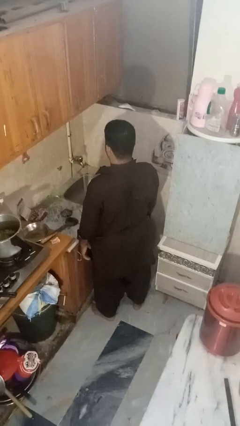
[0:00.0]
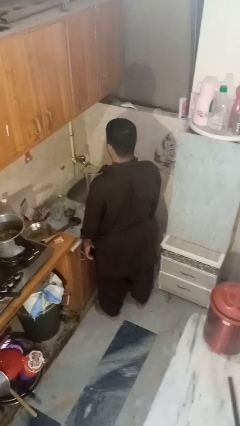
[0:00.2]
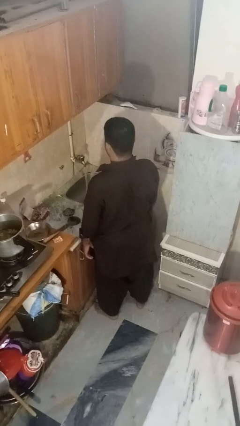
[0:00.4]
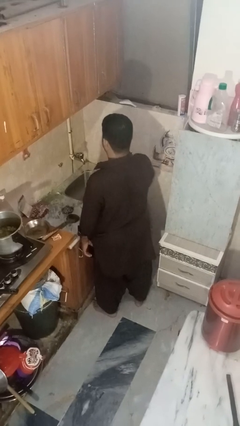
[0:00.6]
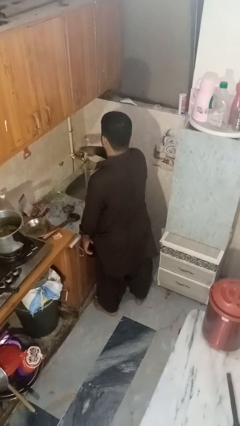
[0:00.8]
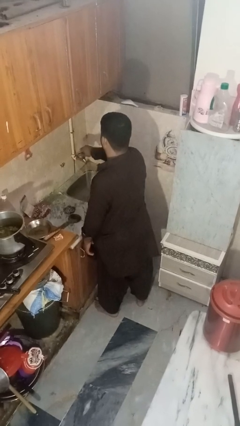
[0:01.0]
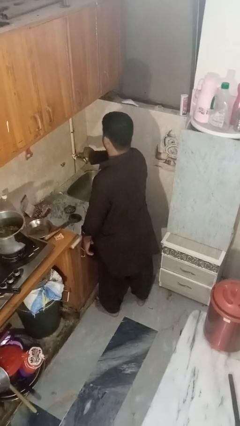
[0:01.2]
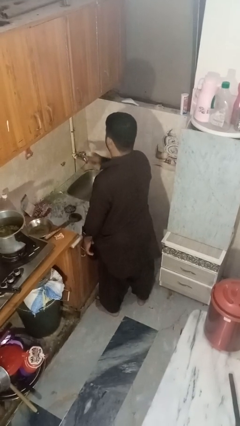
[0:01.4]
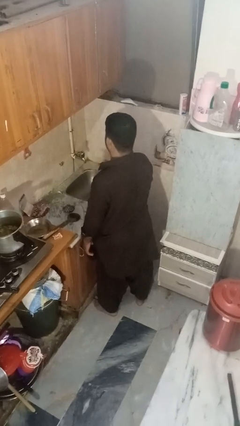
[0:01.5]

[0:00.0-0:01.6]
person turns off faucet

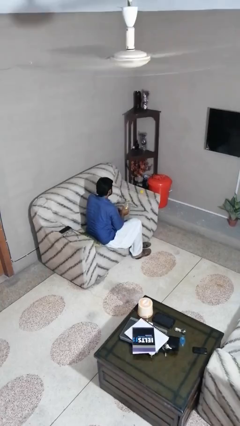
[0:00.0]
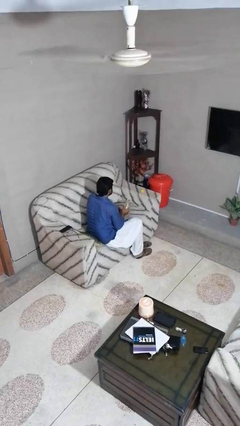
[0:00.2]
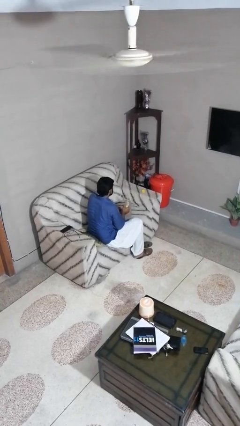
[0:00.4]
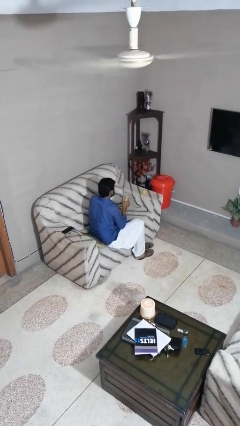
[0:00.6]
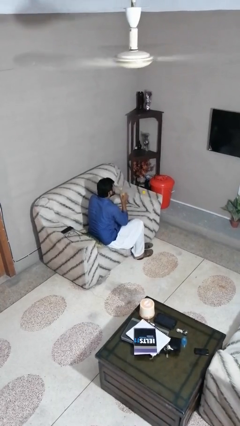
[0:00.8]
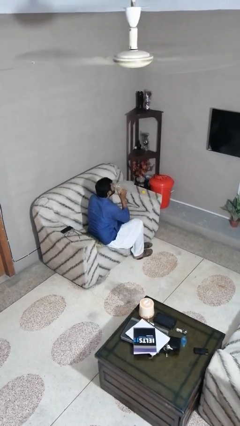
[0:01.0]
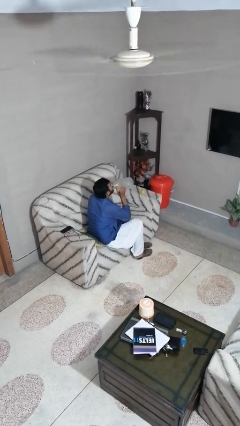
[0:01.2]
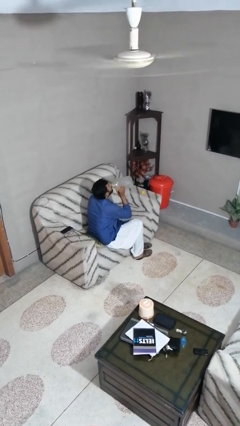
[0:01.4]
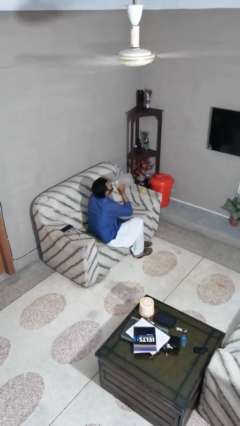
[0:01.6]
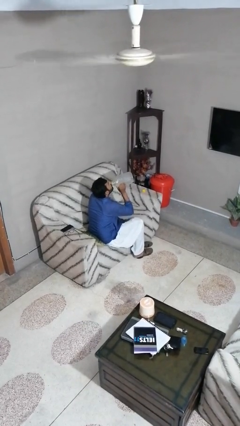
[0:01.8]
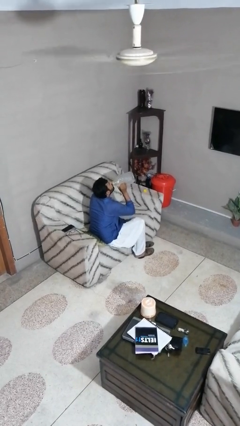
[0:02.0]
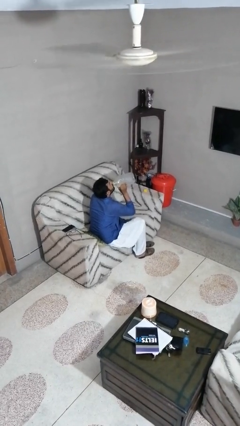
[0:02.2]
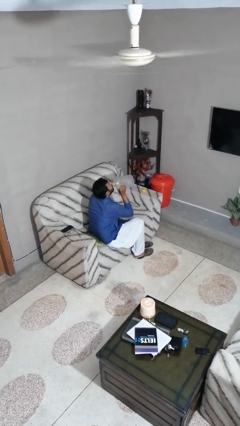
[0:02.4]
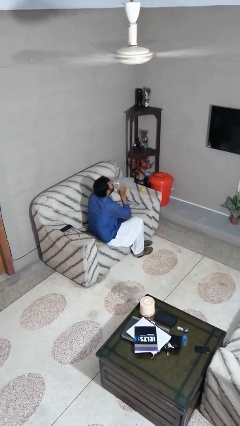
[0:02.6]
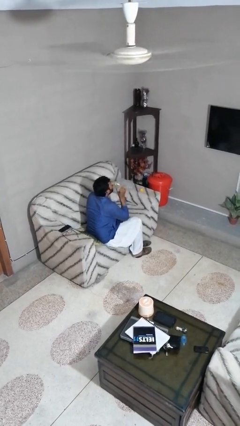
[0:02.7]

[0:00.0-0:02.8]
person drinks from bottle

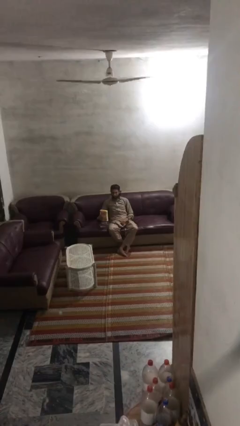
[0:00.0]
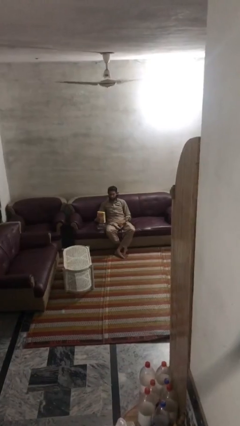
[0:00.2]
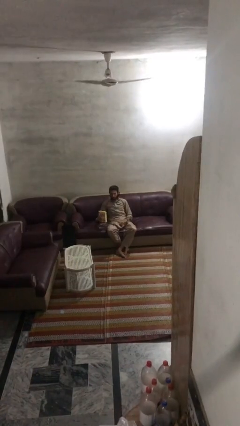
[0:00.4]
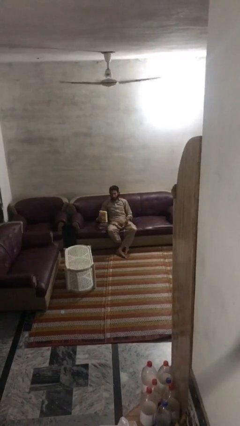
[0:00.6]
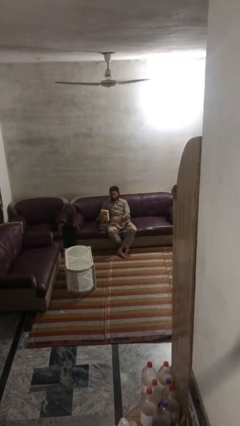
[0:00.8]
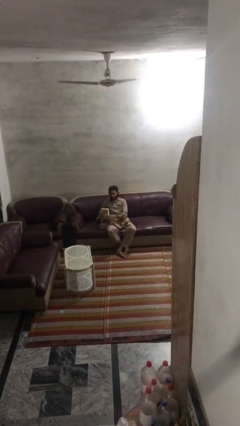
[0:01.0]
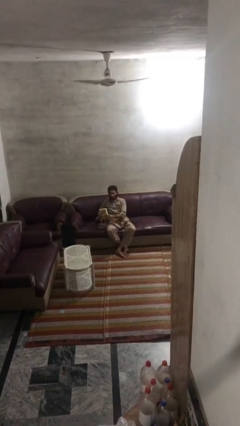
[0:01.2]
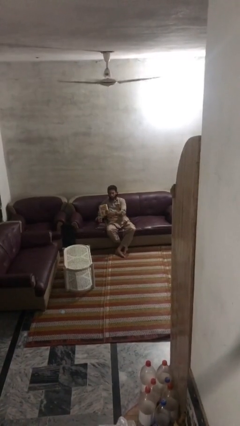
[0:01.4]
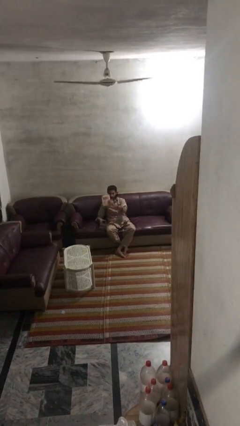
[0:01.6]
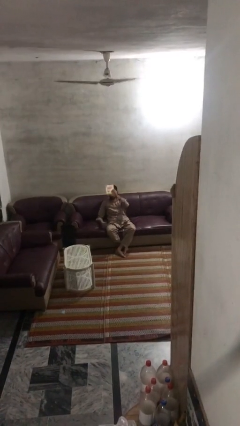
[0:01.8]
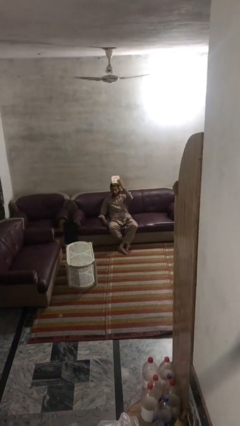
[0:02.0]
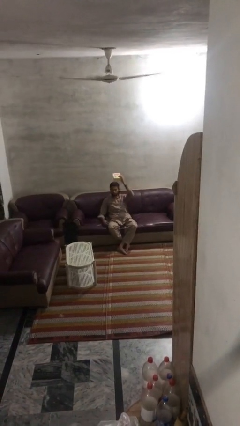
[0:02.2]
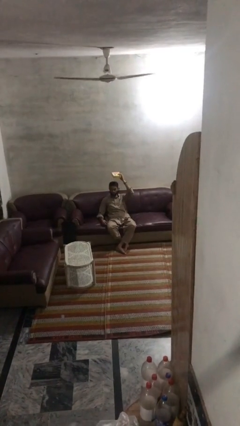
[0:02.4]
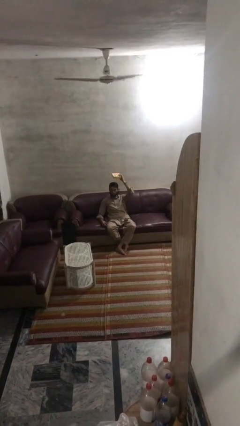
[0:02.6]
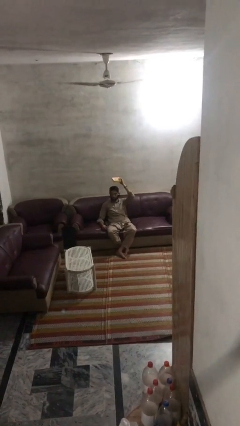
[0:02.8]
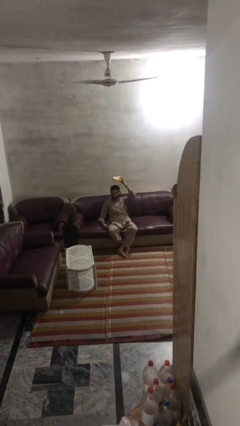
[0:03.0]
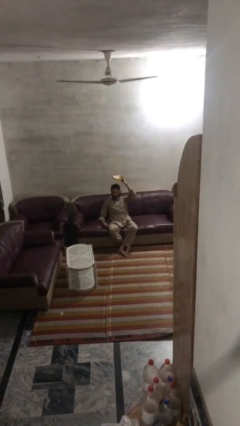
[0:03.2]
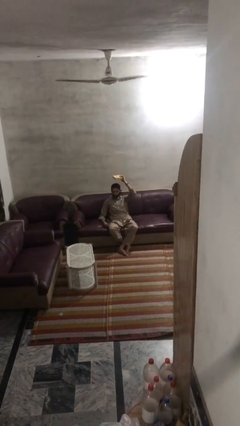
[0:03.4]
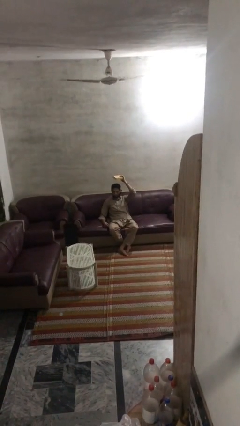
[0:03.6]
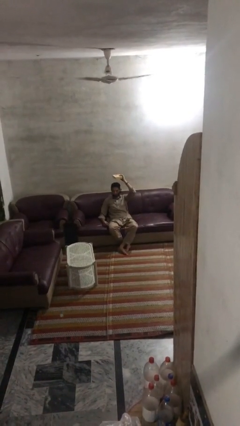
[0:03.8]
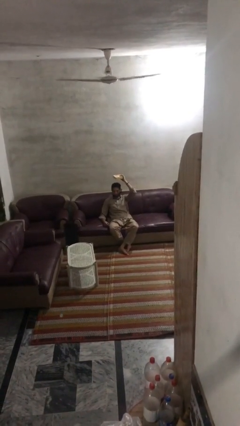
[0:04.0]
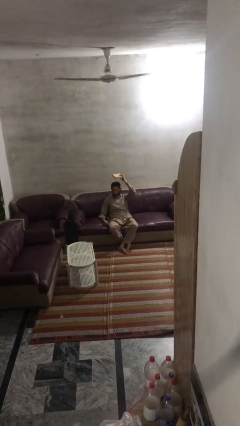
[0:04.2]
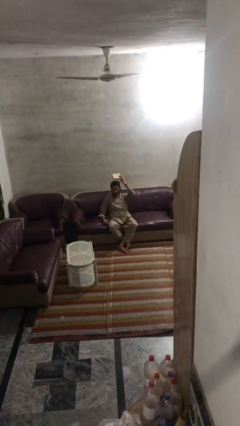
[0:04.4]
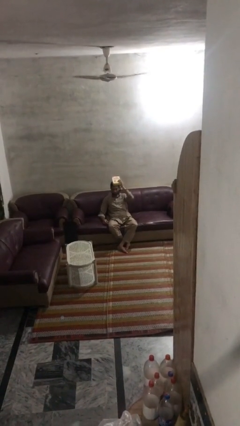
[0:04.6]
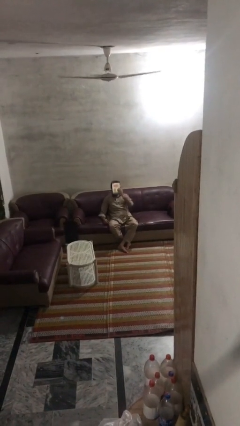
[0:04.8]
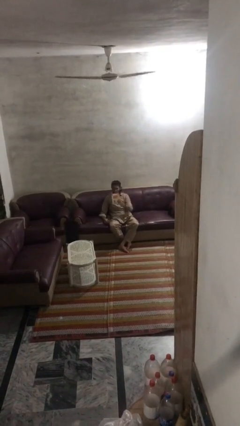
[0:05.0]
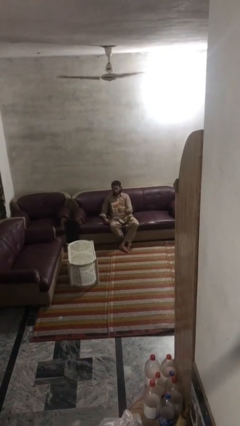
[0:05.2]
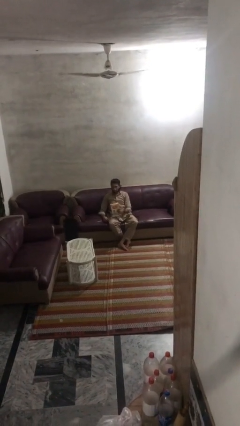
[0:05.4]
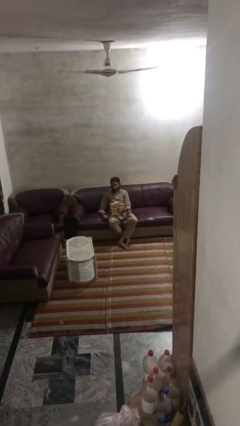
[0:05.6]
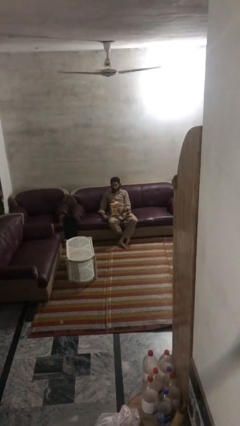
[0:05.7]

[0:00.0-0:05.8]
person holds object above head

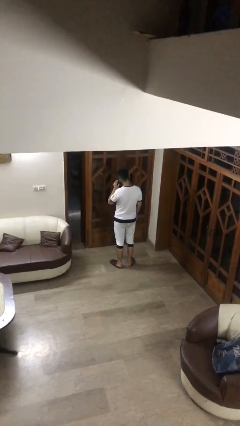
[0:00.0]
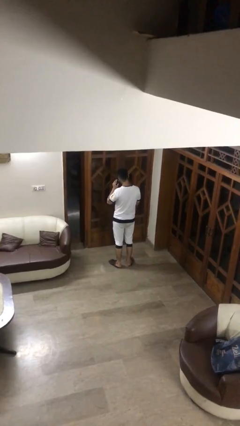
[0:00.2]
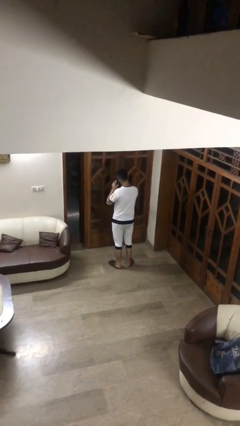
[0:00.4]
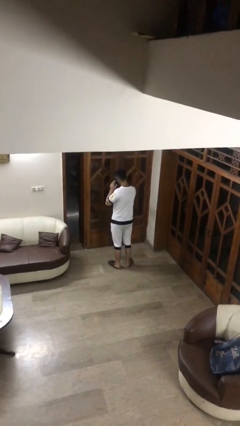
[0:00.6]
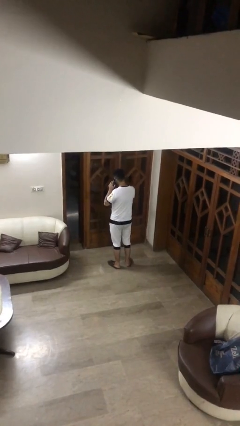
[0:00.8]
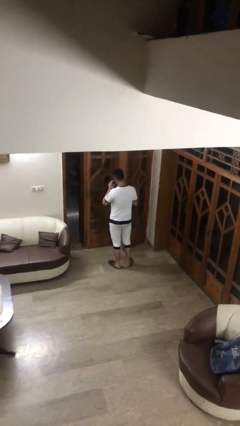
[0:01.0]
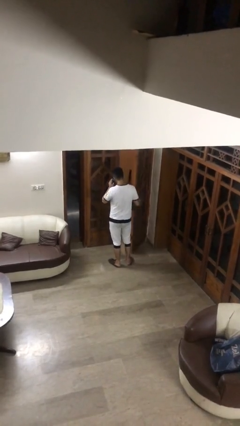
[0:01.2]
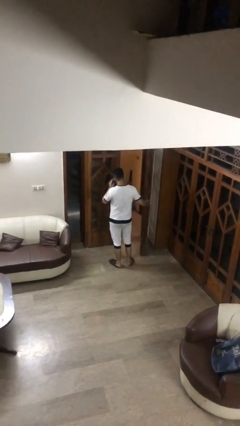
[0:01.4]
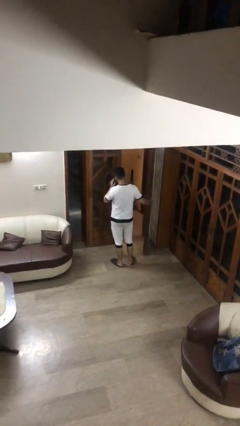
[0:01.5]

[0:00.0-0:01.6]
person opens facility door

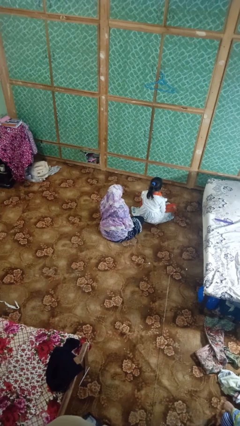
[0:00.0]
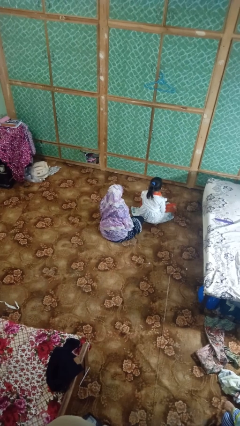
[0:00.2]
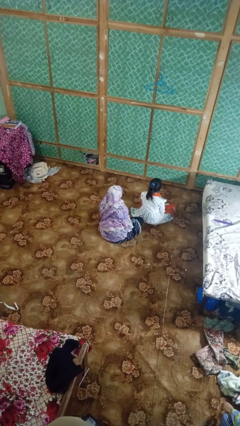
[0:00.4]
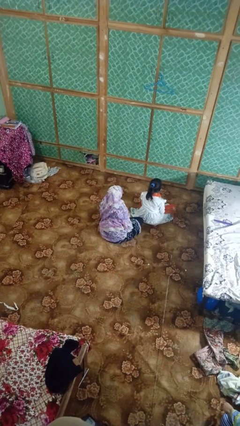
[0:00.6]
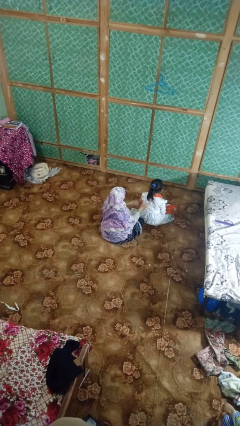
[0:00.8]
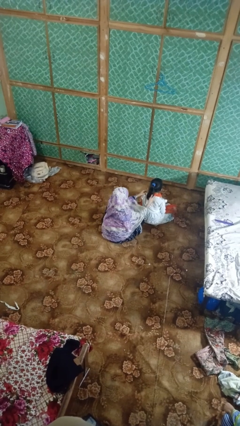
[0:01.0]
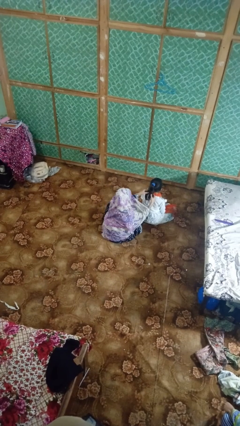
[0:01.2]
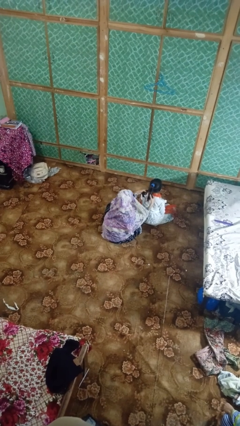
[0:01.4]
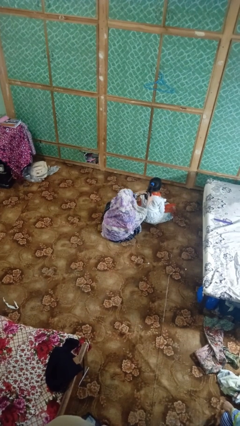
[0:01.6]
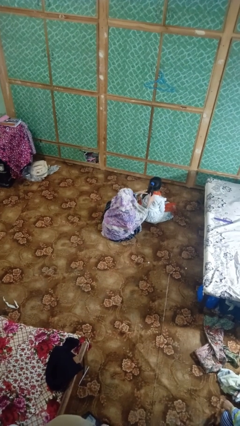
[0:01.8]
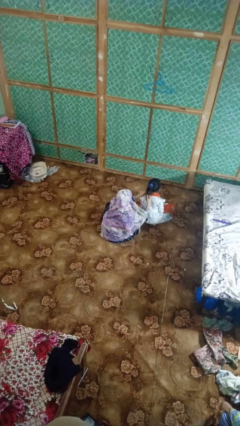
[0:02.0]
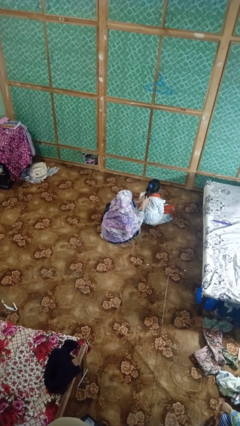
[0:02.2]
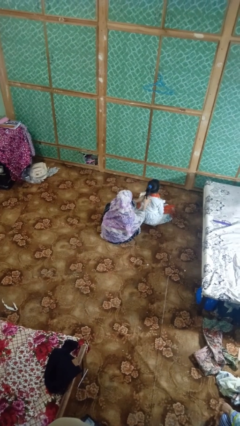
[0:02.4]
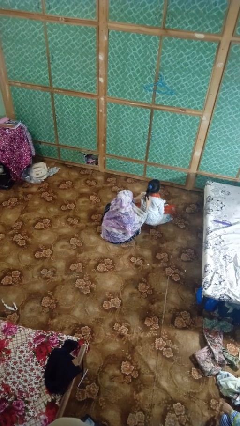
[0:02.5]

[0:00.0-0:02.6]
person braids hair of person

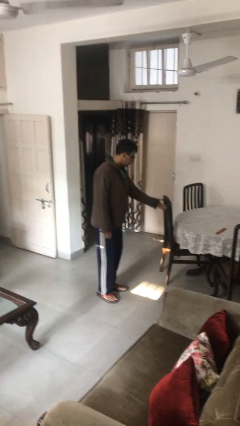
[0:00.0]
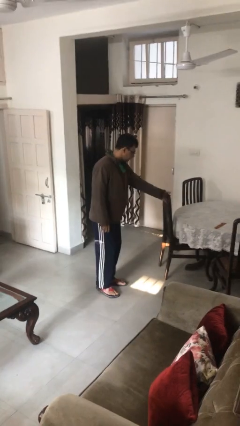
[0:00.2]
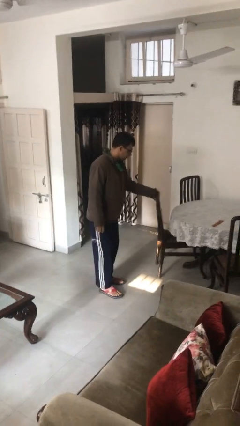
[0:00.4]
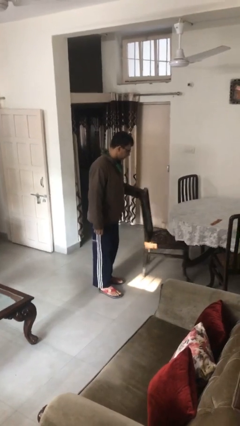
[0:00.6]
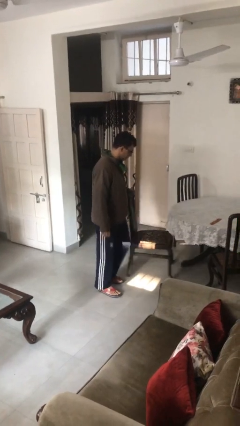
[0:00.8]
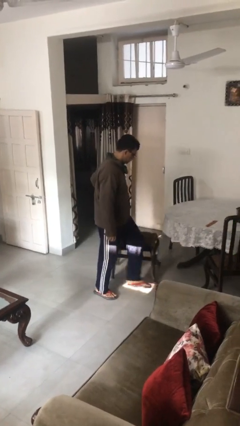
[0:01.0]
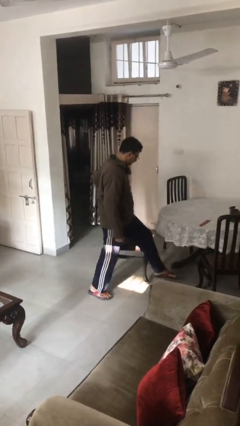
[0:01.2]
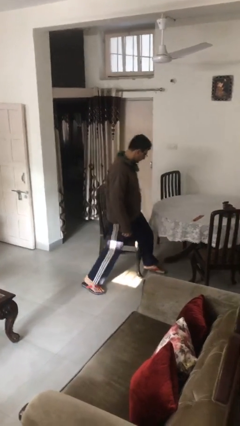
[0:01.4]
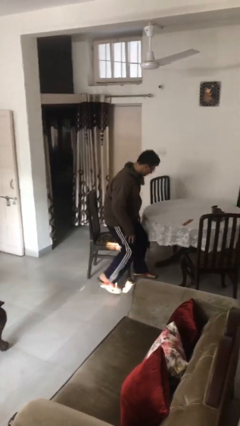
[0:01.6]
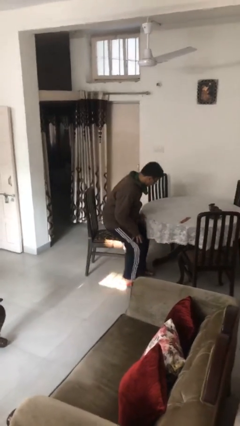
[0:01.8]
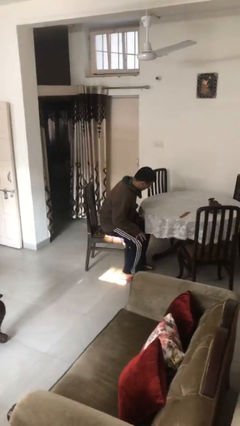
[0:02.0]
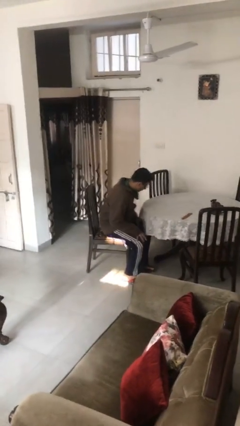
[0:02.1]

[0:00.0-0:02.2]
person sits down

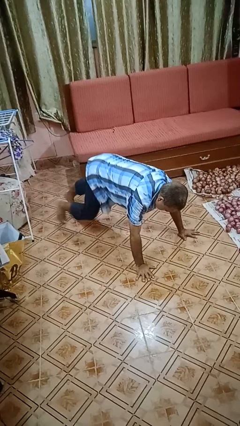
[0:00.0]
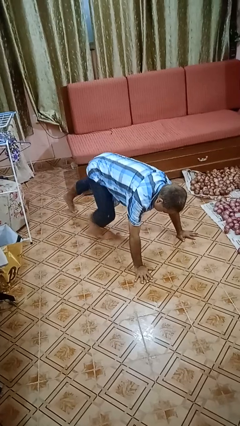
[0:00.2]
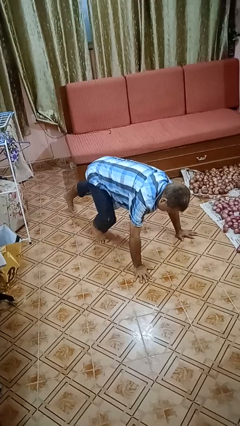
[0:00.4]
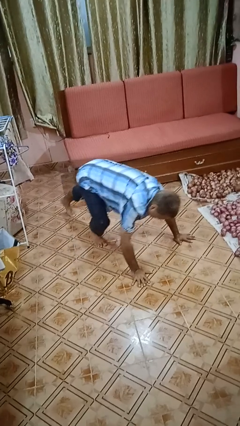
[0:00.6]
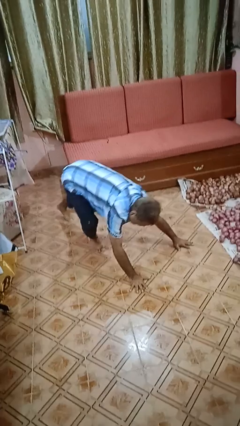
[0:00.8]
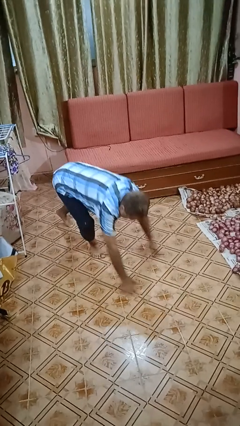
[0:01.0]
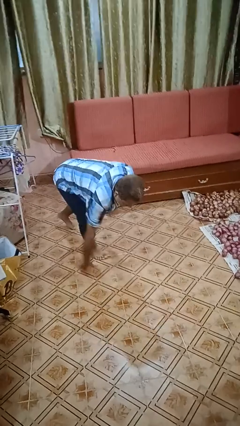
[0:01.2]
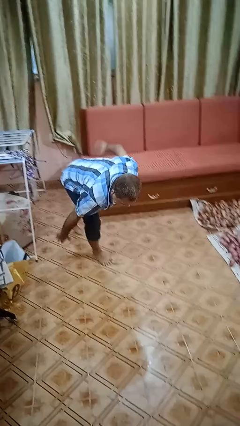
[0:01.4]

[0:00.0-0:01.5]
person stands up from floor
